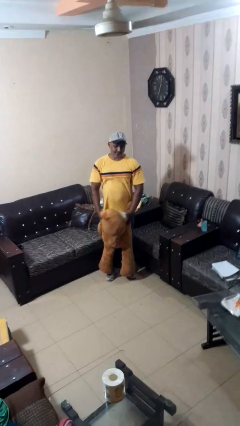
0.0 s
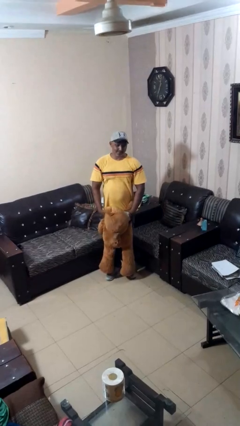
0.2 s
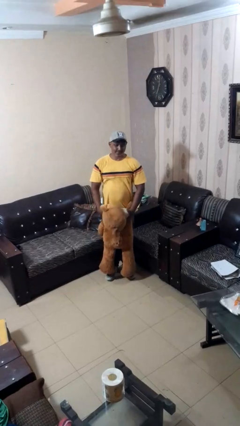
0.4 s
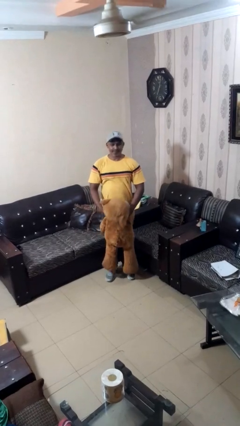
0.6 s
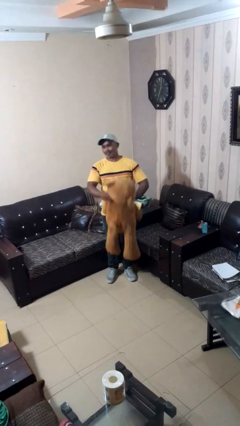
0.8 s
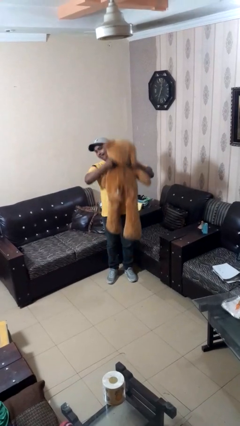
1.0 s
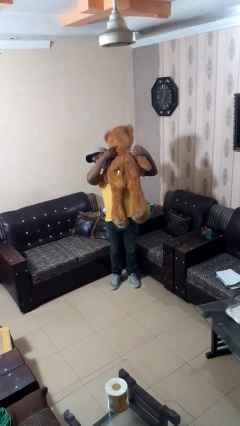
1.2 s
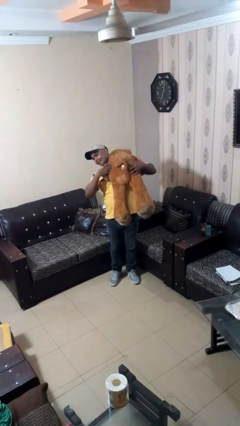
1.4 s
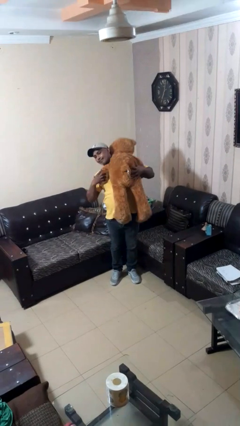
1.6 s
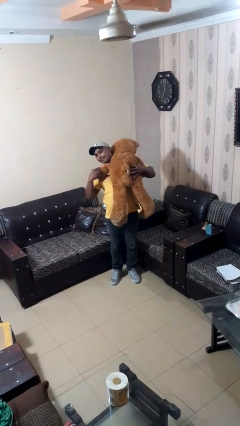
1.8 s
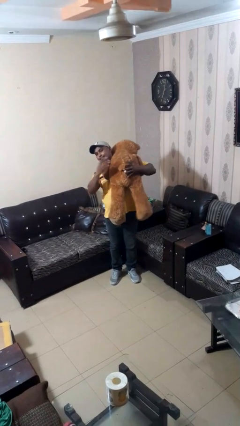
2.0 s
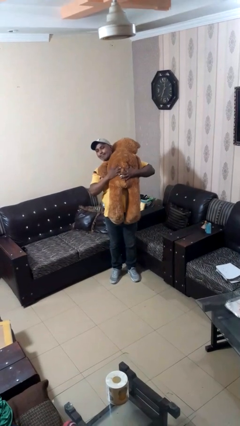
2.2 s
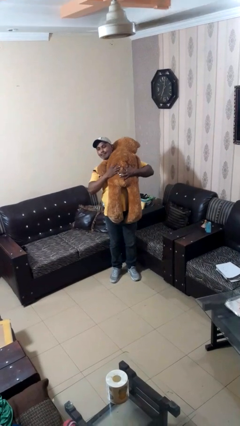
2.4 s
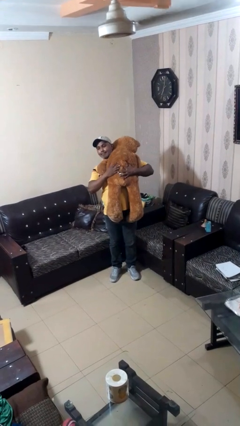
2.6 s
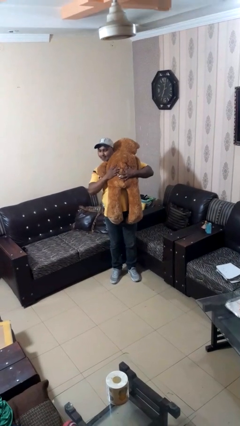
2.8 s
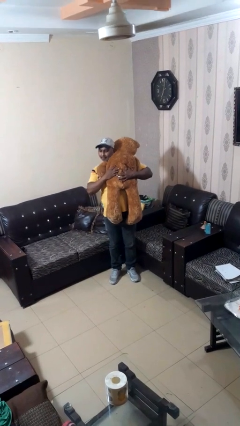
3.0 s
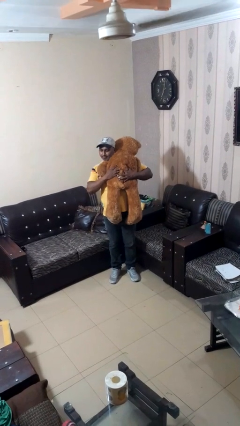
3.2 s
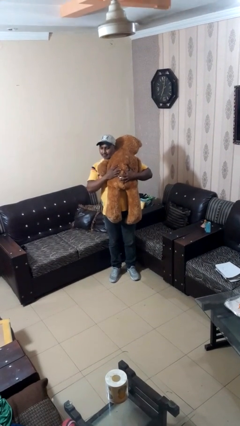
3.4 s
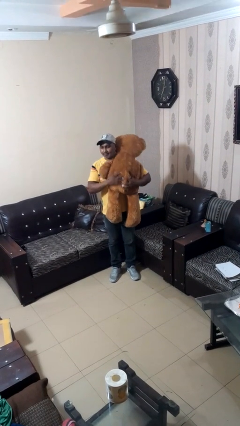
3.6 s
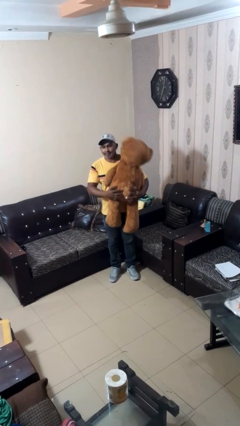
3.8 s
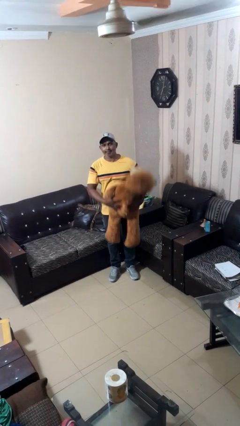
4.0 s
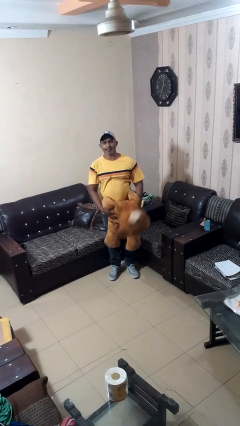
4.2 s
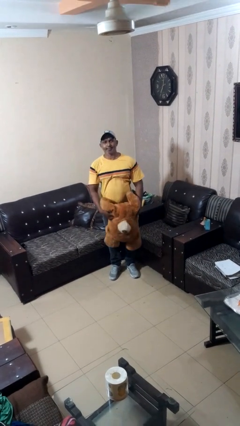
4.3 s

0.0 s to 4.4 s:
person hugs stuffed animal

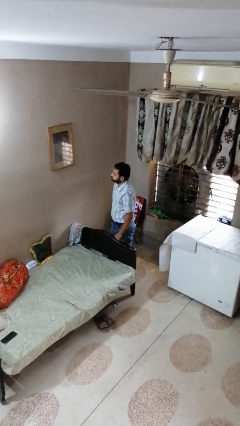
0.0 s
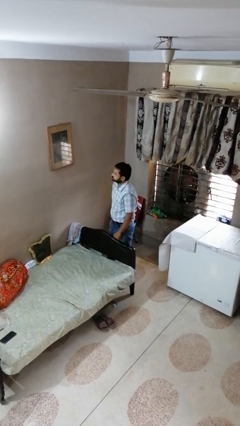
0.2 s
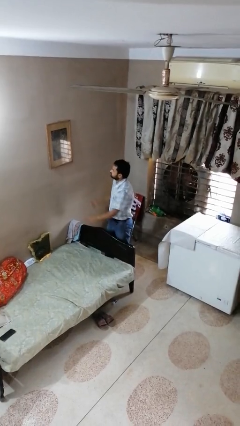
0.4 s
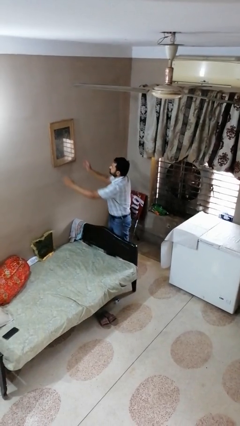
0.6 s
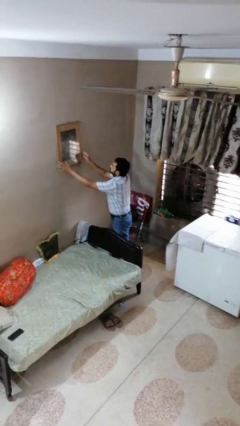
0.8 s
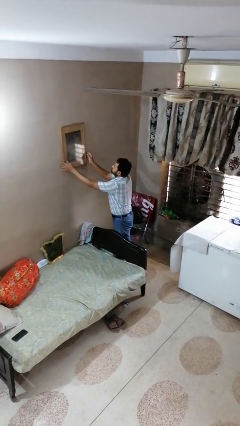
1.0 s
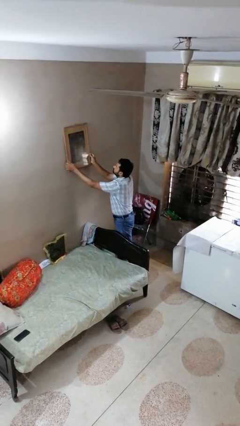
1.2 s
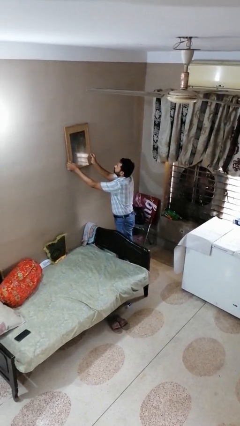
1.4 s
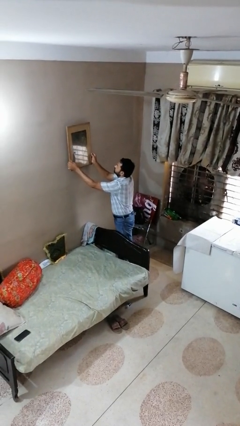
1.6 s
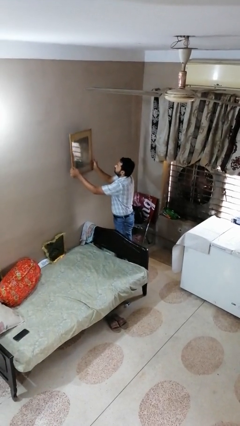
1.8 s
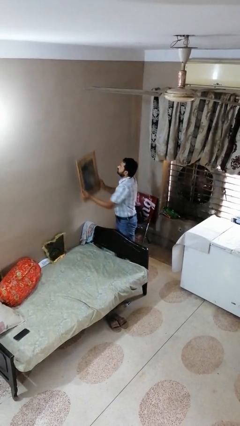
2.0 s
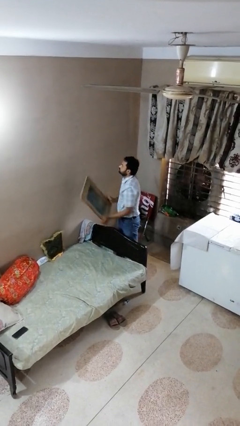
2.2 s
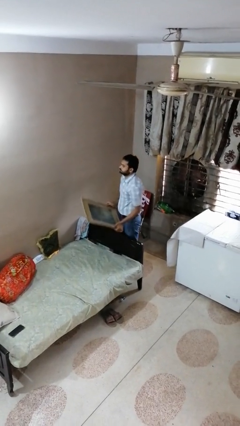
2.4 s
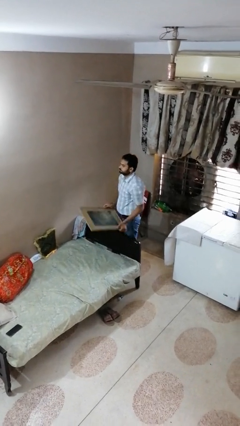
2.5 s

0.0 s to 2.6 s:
person takes down picture frame

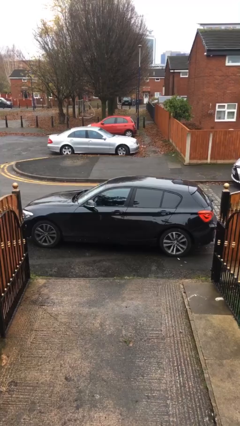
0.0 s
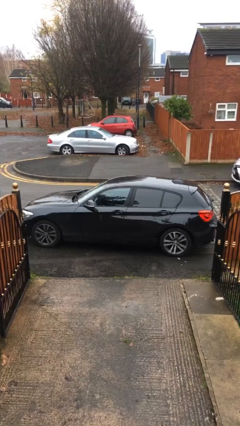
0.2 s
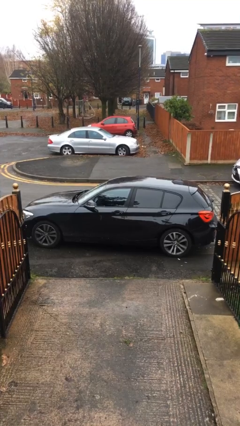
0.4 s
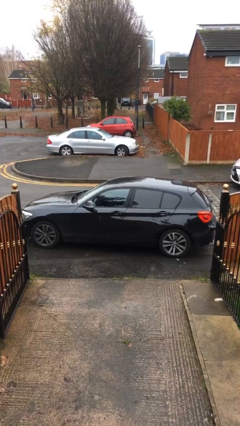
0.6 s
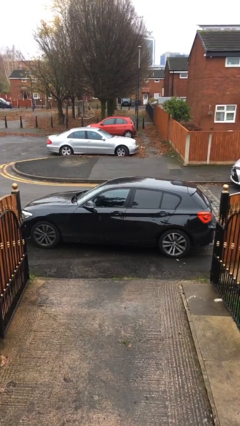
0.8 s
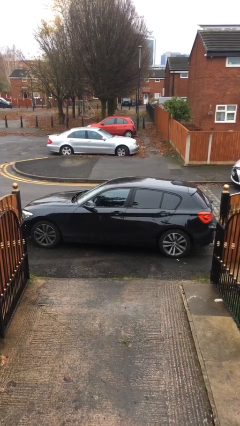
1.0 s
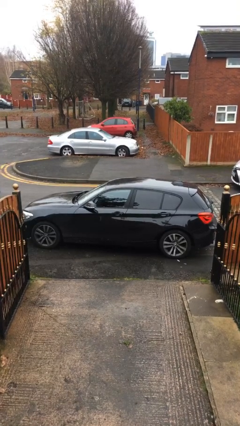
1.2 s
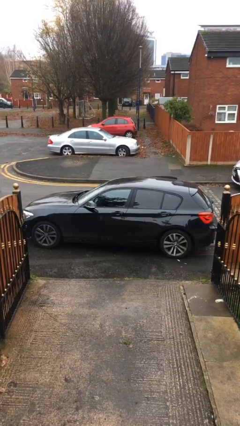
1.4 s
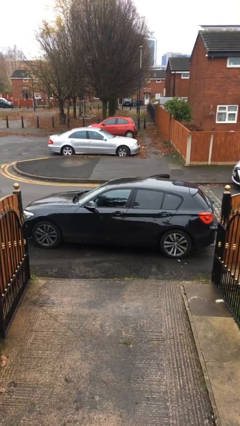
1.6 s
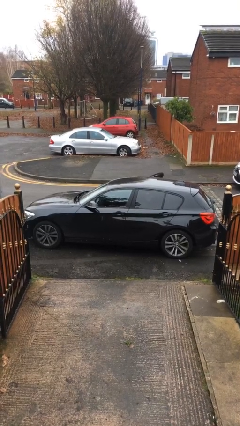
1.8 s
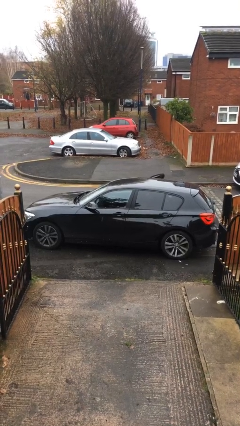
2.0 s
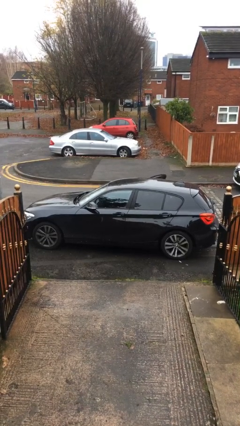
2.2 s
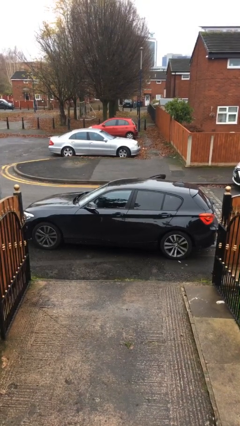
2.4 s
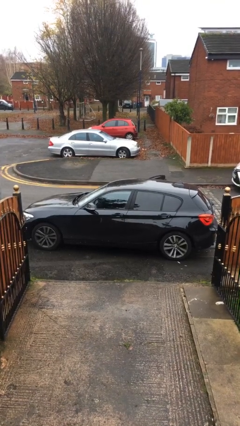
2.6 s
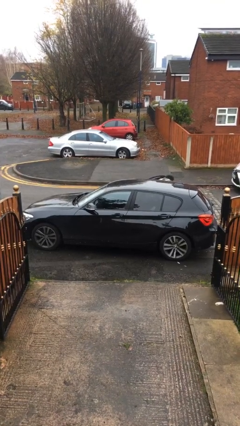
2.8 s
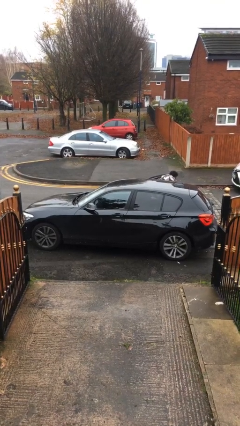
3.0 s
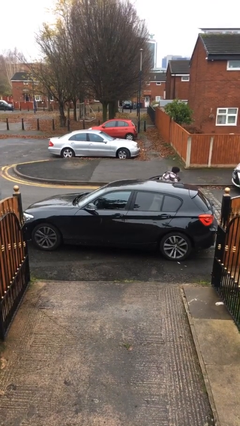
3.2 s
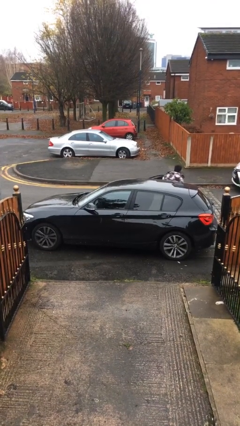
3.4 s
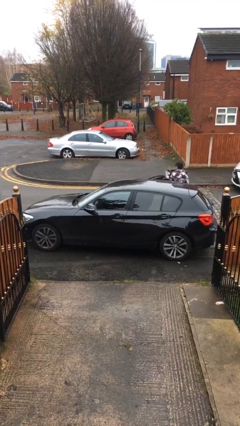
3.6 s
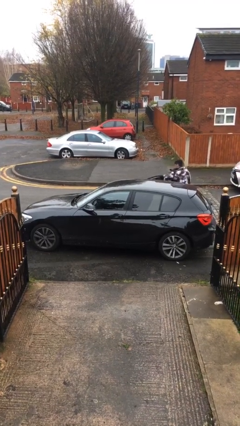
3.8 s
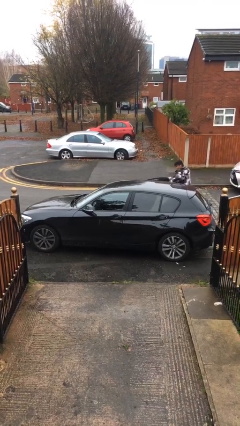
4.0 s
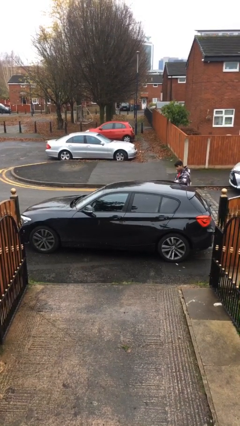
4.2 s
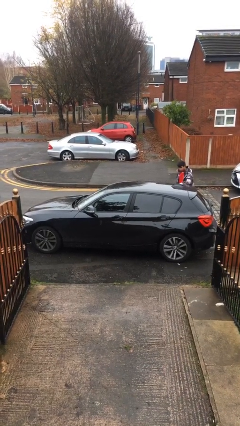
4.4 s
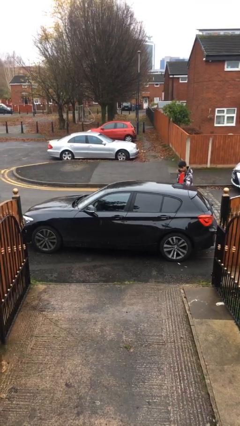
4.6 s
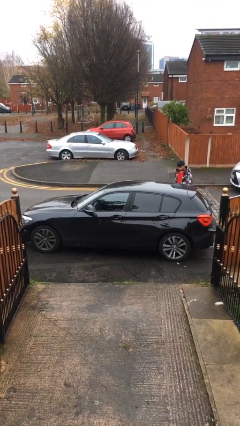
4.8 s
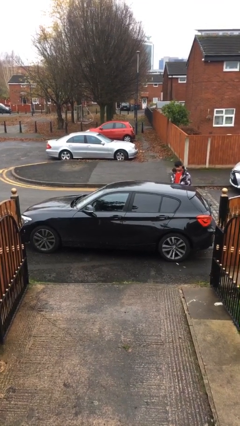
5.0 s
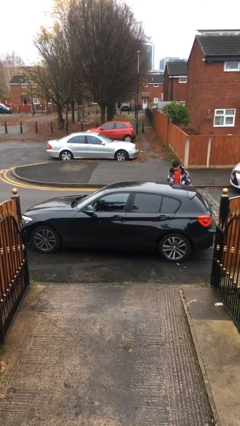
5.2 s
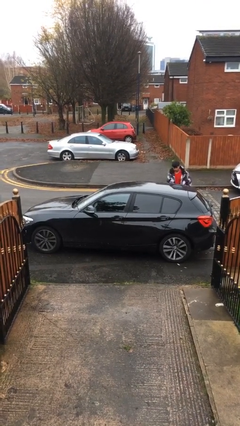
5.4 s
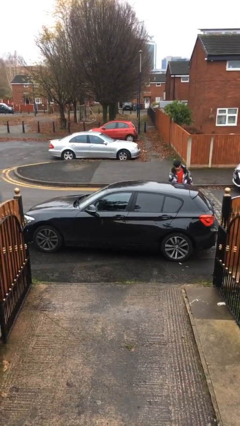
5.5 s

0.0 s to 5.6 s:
car drops off person

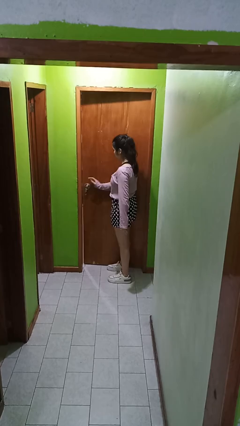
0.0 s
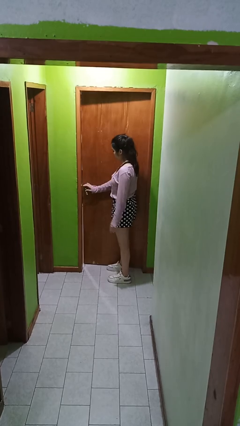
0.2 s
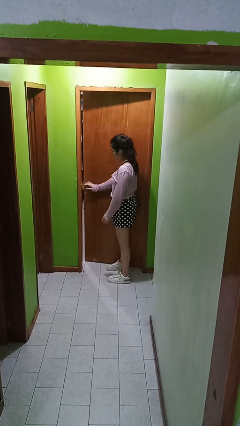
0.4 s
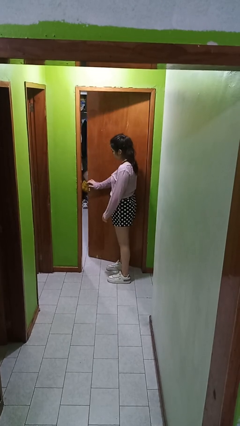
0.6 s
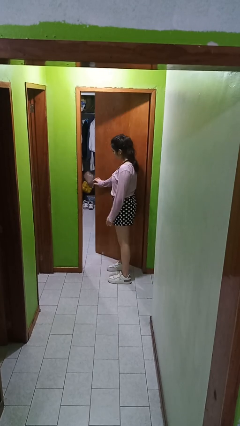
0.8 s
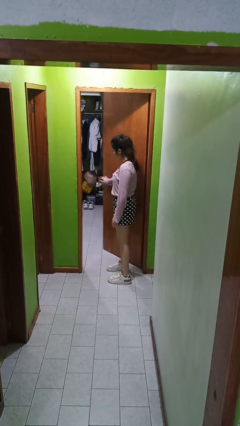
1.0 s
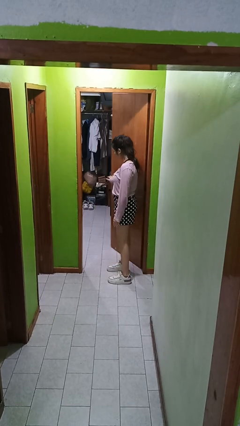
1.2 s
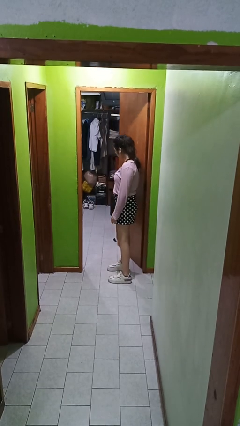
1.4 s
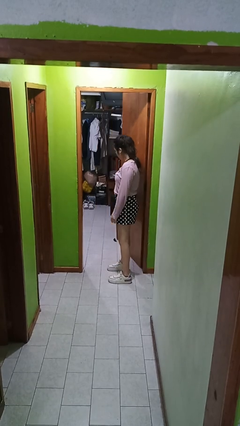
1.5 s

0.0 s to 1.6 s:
person opens facility door

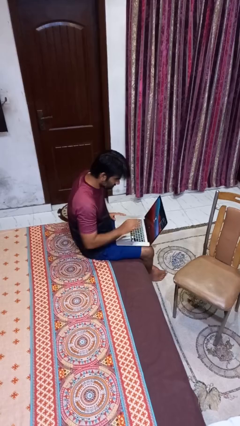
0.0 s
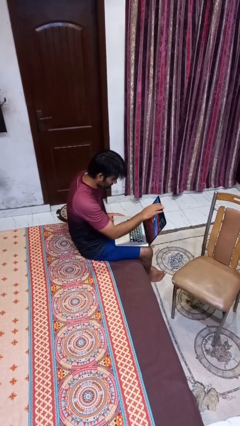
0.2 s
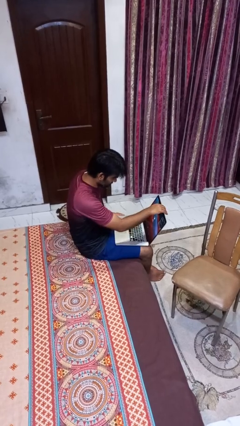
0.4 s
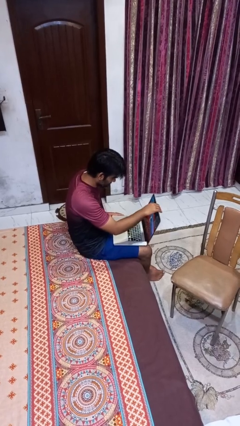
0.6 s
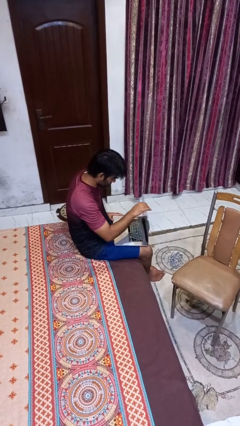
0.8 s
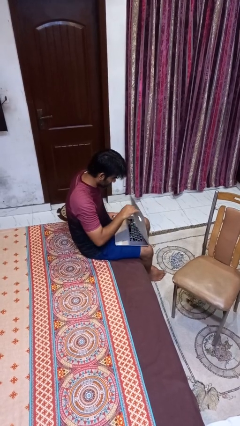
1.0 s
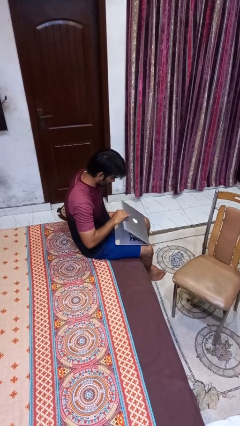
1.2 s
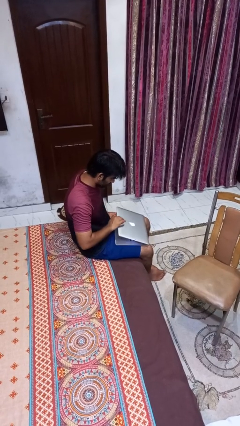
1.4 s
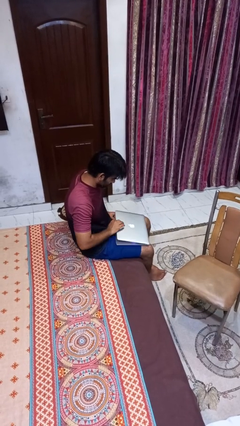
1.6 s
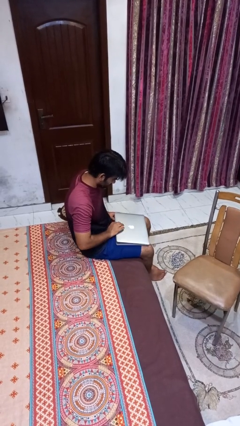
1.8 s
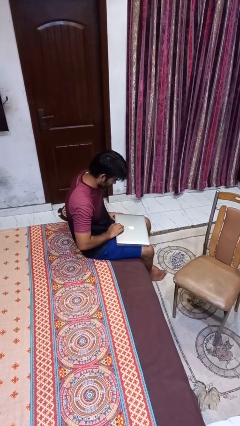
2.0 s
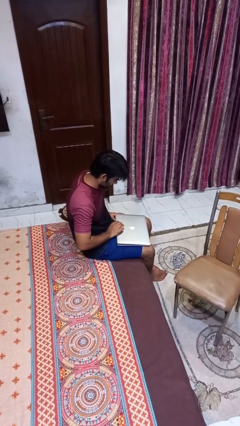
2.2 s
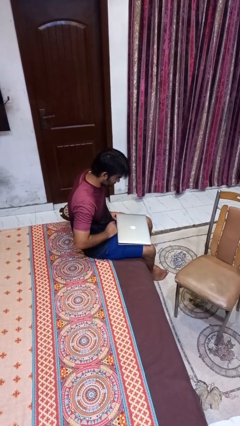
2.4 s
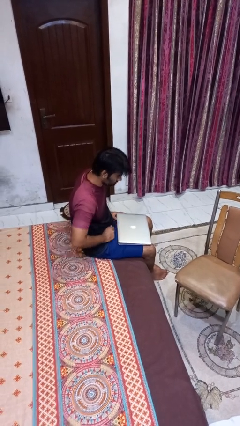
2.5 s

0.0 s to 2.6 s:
person closes laptop

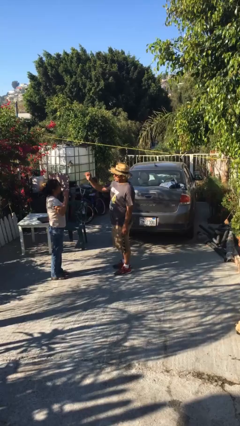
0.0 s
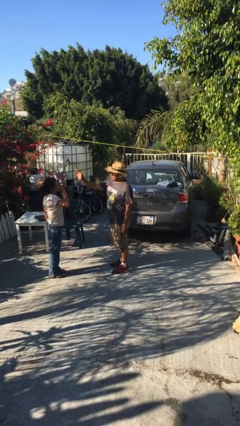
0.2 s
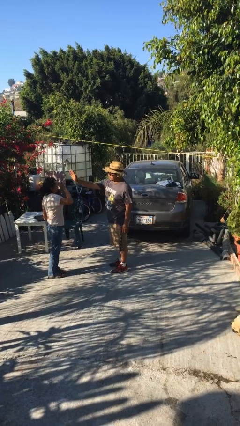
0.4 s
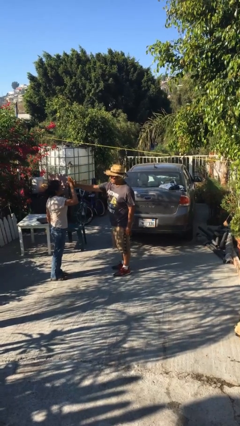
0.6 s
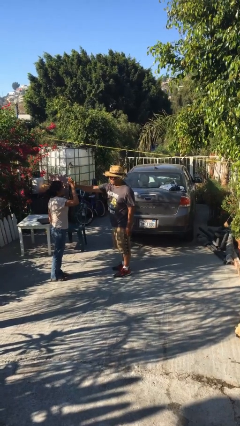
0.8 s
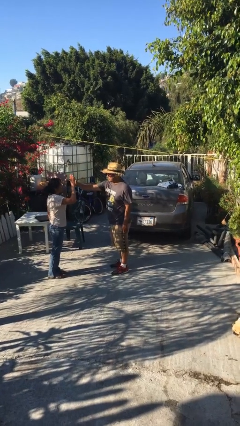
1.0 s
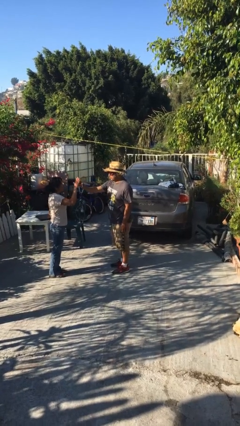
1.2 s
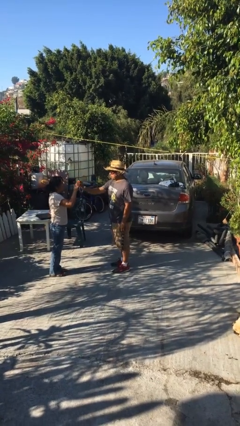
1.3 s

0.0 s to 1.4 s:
person highfives hand
